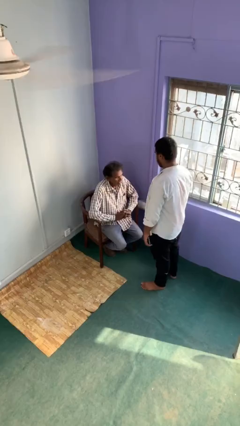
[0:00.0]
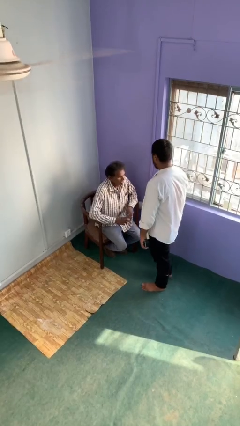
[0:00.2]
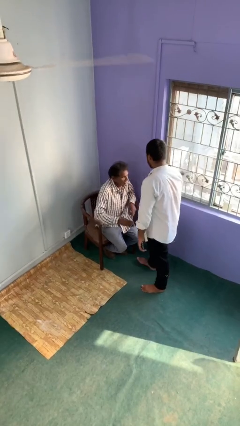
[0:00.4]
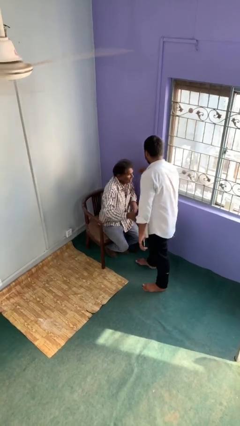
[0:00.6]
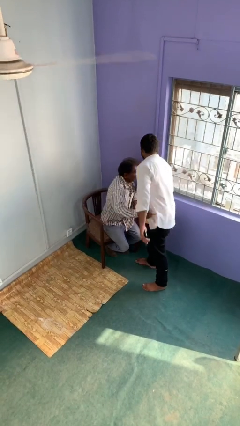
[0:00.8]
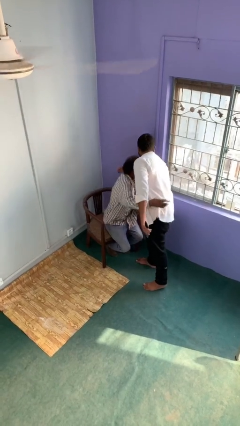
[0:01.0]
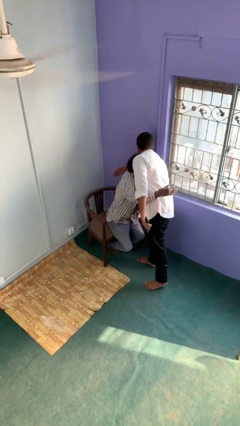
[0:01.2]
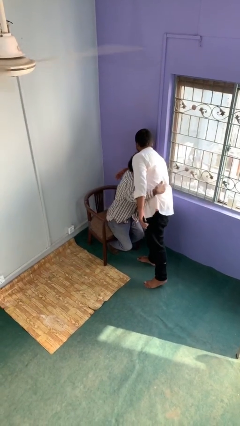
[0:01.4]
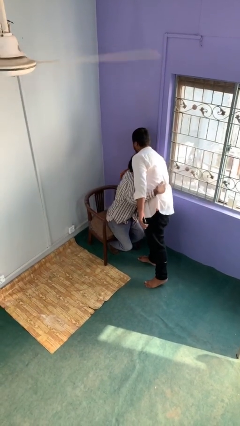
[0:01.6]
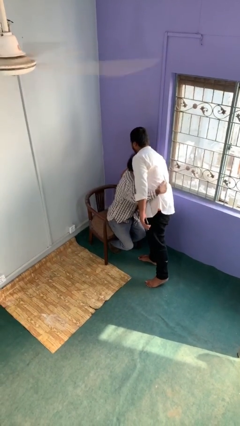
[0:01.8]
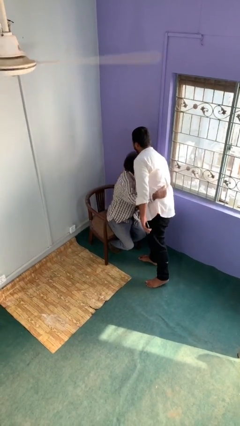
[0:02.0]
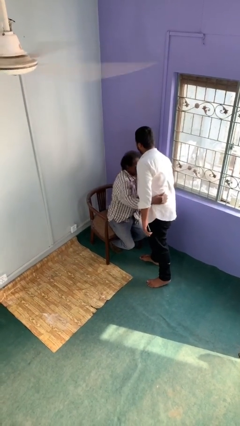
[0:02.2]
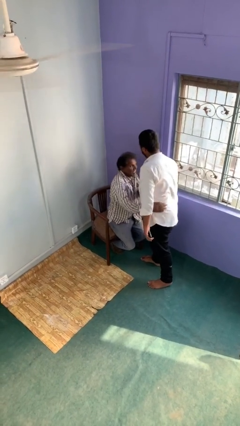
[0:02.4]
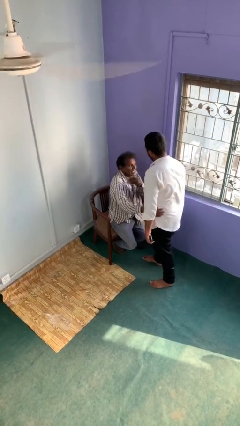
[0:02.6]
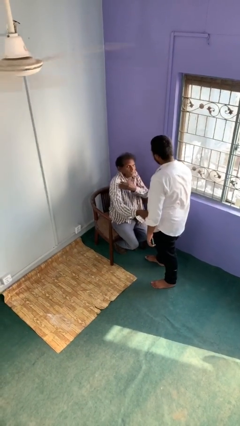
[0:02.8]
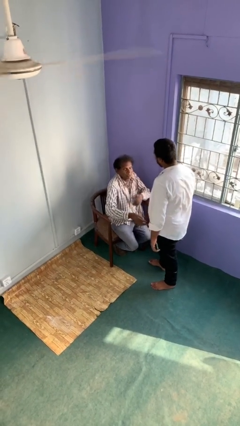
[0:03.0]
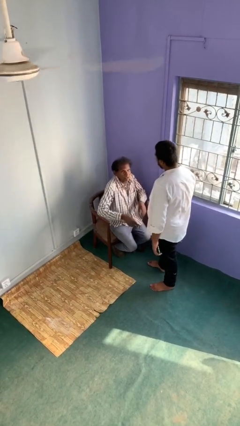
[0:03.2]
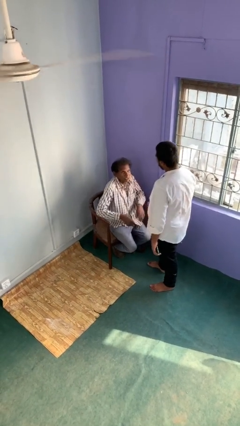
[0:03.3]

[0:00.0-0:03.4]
person embraces person

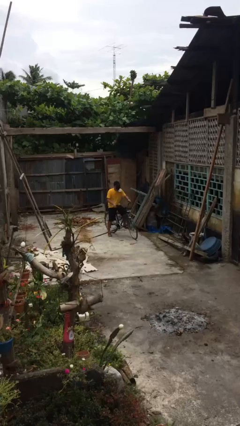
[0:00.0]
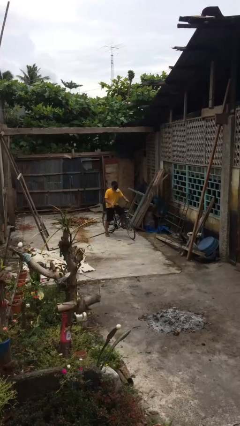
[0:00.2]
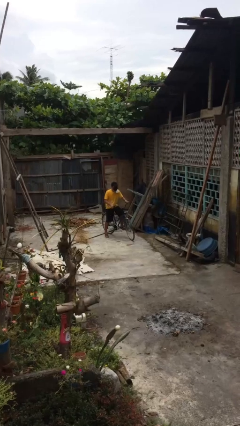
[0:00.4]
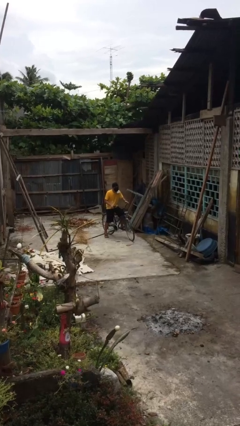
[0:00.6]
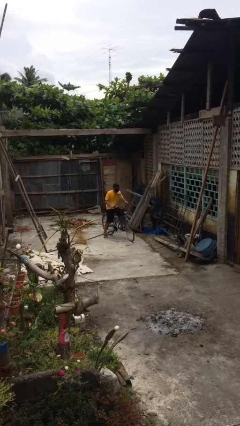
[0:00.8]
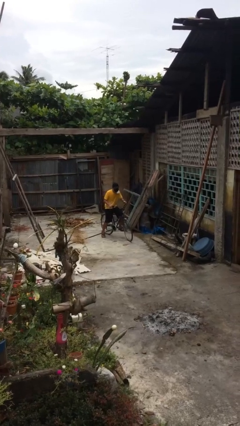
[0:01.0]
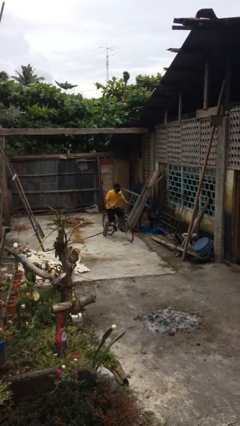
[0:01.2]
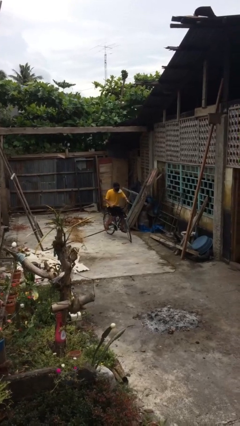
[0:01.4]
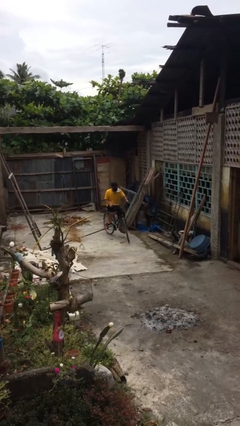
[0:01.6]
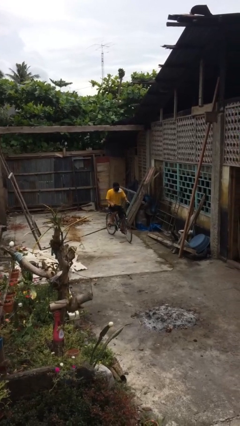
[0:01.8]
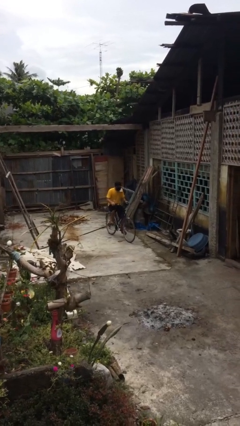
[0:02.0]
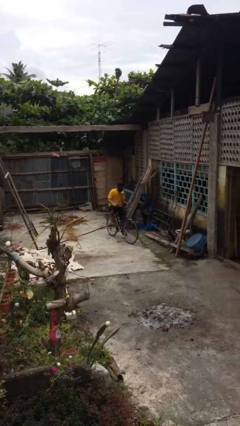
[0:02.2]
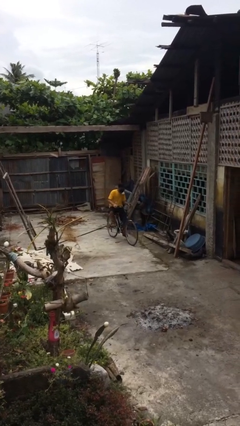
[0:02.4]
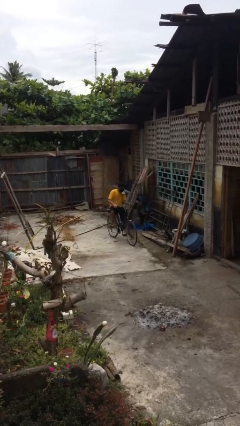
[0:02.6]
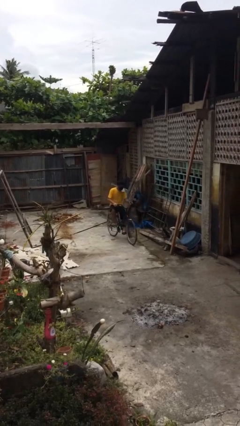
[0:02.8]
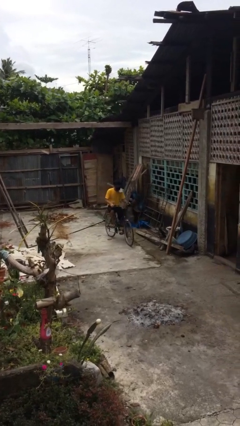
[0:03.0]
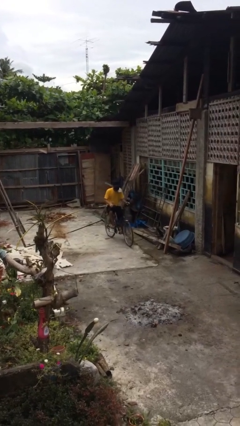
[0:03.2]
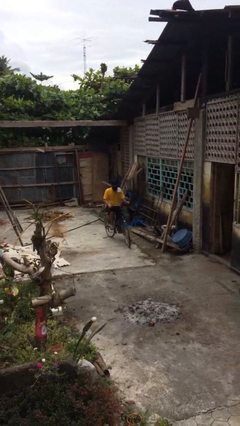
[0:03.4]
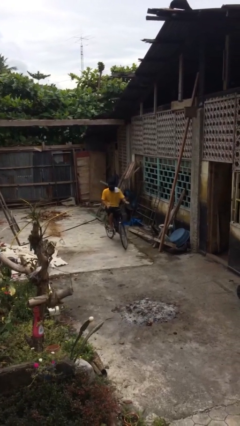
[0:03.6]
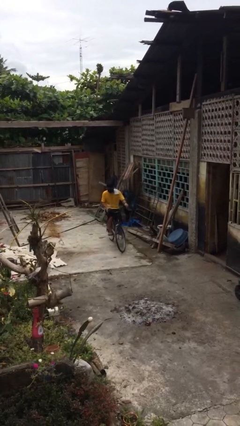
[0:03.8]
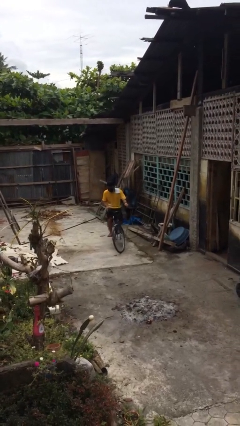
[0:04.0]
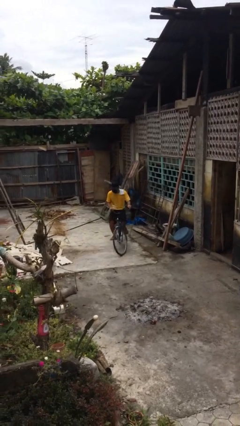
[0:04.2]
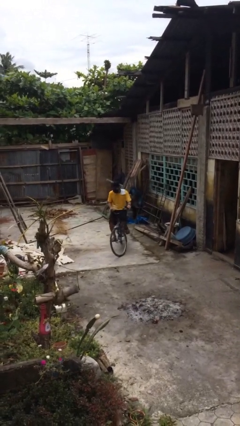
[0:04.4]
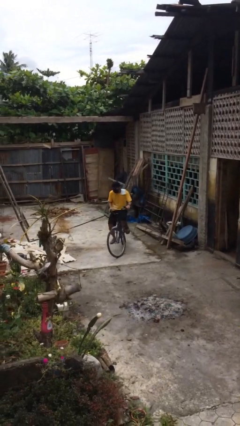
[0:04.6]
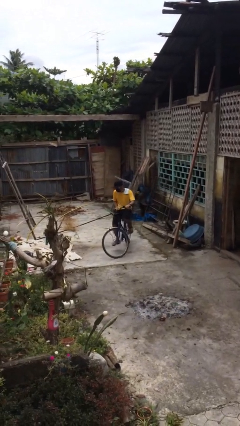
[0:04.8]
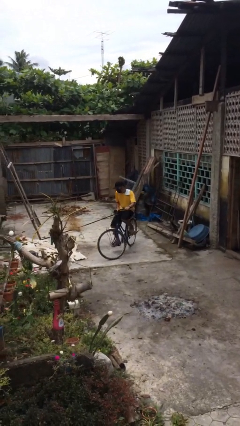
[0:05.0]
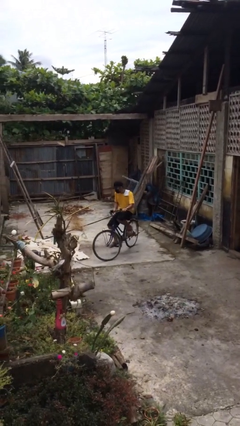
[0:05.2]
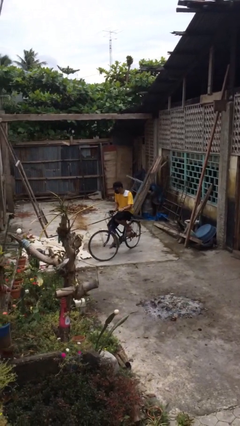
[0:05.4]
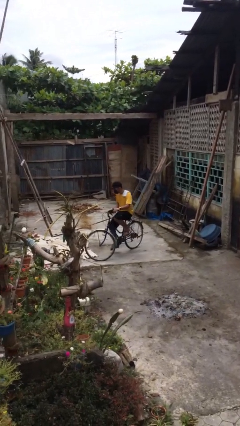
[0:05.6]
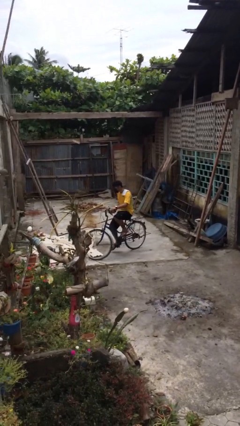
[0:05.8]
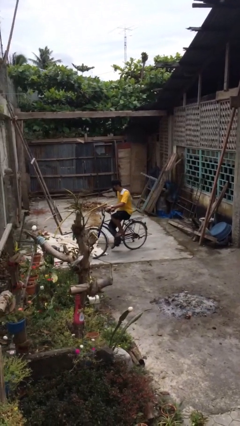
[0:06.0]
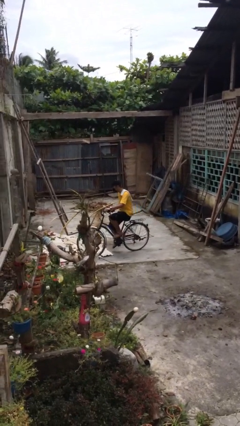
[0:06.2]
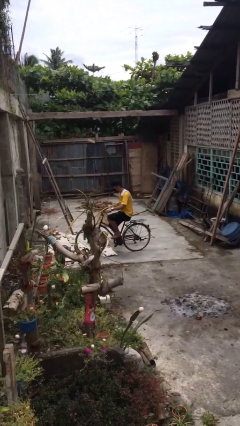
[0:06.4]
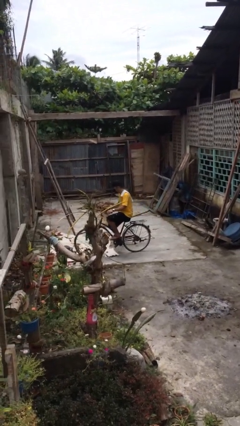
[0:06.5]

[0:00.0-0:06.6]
person rides bicycle

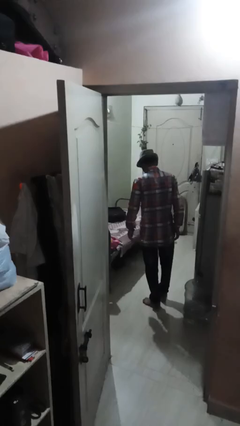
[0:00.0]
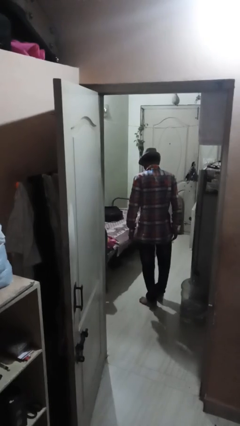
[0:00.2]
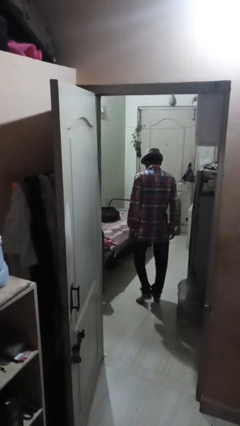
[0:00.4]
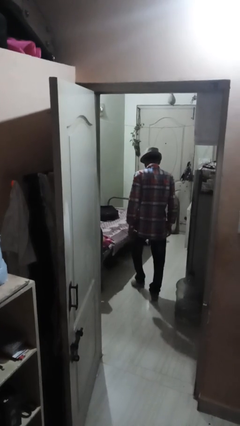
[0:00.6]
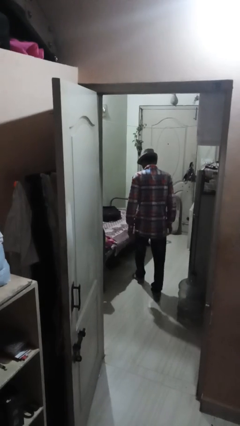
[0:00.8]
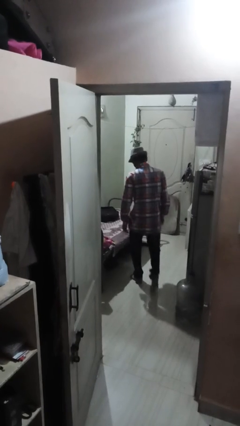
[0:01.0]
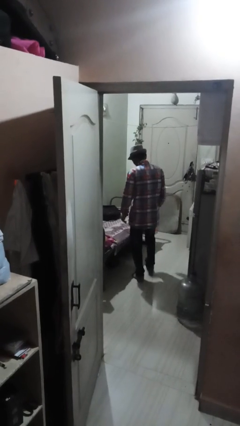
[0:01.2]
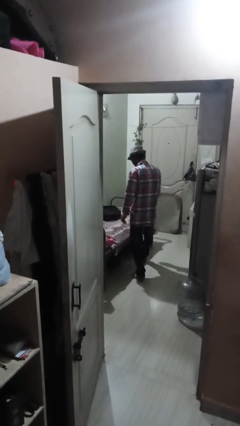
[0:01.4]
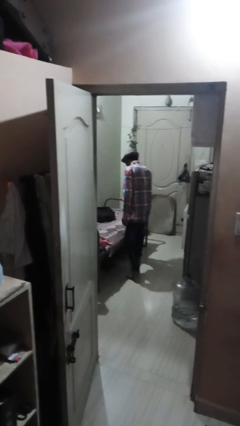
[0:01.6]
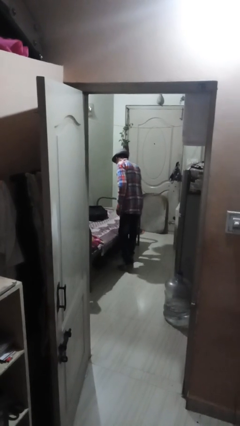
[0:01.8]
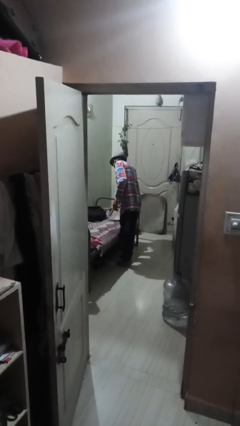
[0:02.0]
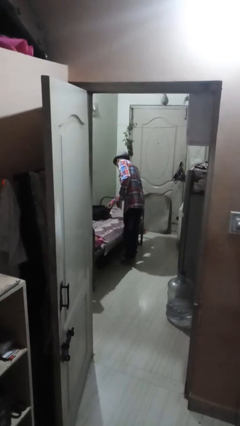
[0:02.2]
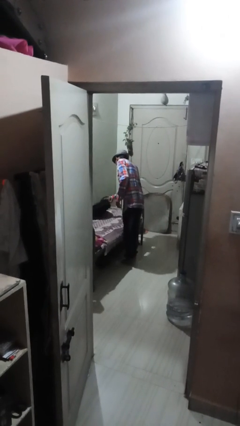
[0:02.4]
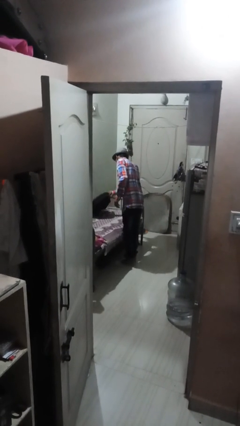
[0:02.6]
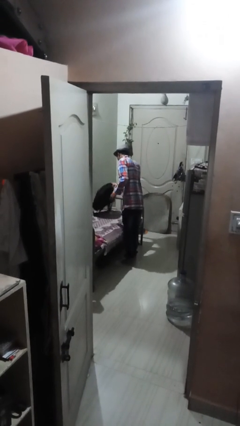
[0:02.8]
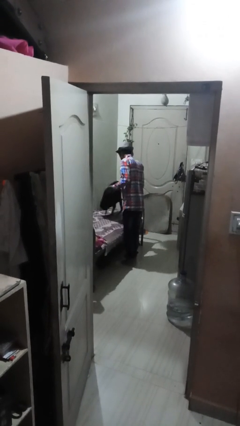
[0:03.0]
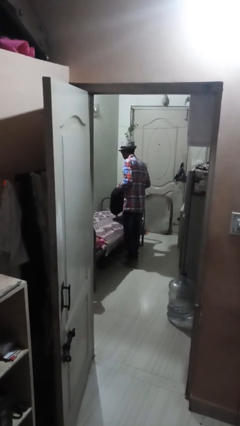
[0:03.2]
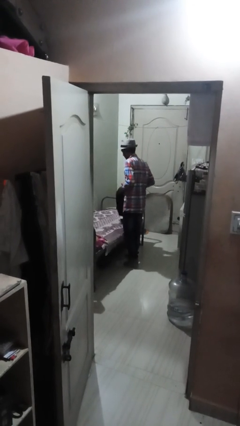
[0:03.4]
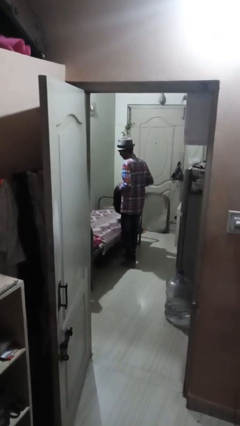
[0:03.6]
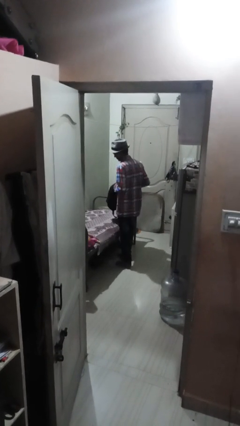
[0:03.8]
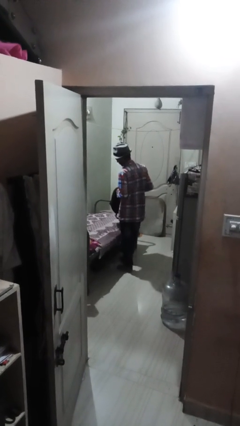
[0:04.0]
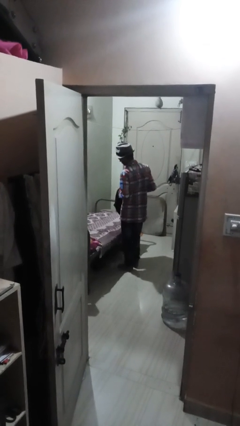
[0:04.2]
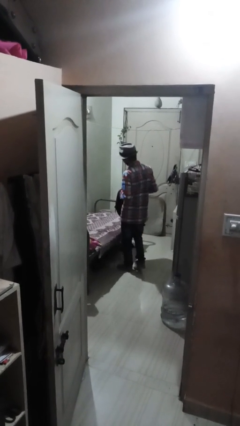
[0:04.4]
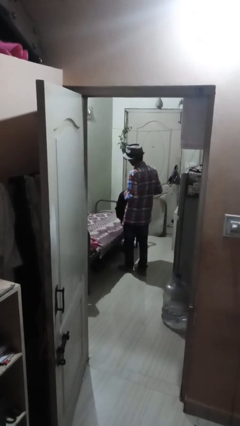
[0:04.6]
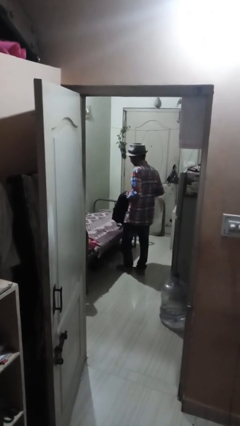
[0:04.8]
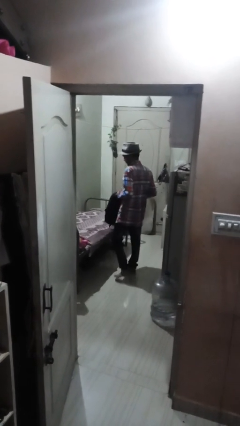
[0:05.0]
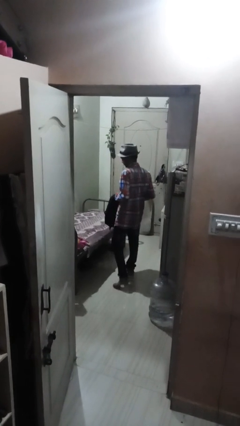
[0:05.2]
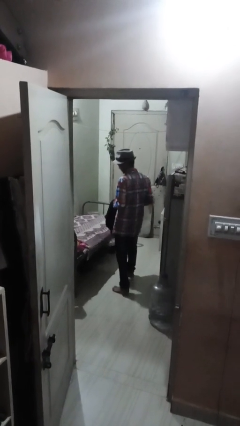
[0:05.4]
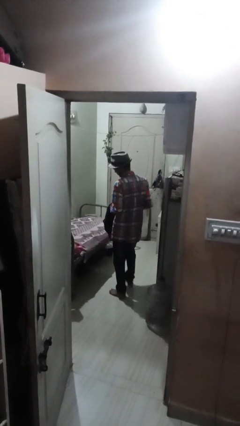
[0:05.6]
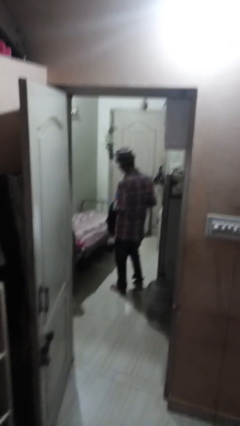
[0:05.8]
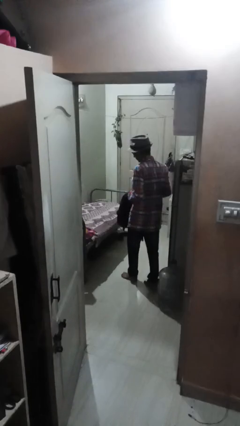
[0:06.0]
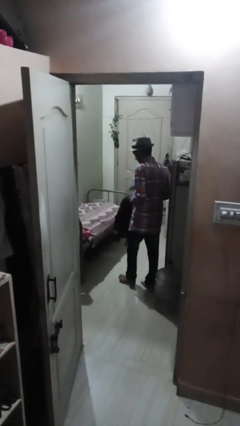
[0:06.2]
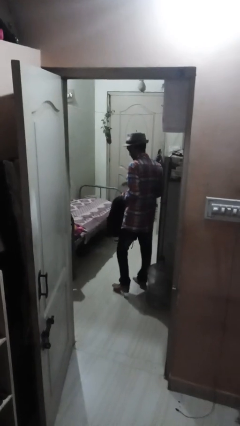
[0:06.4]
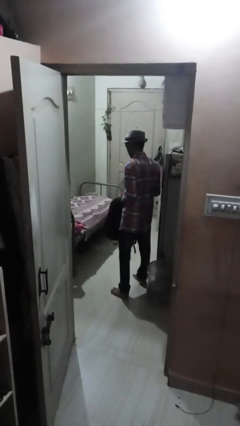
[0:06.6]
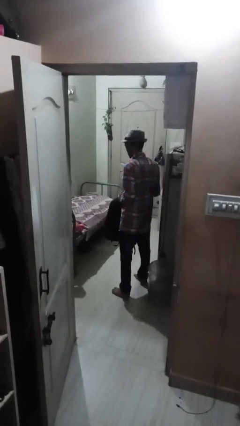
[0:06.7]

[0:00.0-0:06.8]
person picks up object from bed

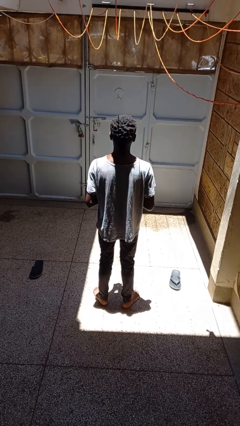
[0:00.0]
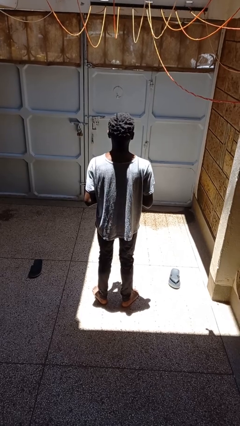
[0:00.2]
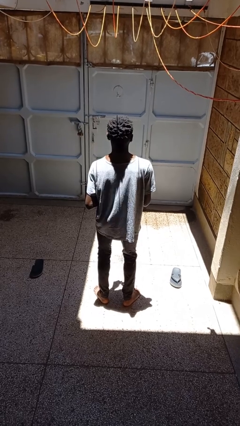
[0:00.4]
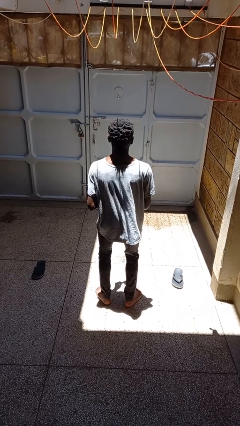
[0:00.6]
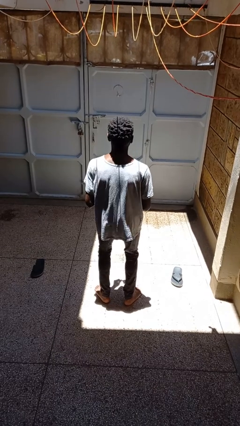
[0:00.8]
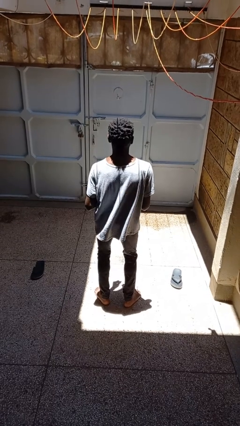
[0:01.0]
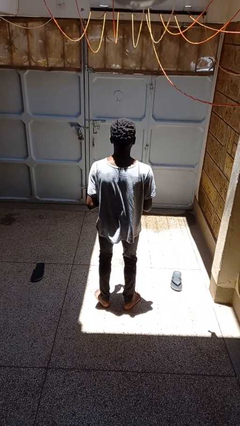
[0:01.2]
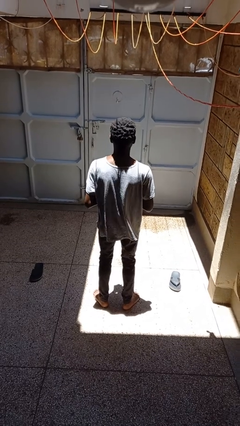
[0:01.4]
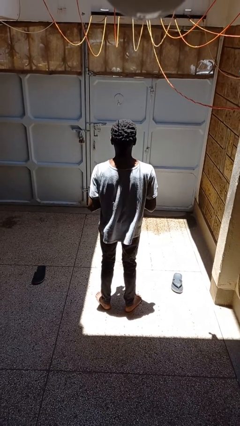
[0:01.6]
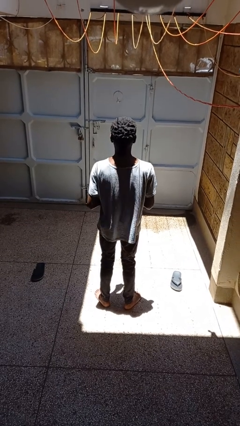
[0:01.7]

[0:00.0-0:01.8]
person dances in place
